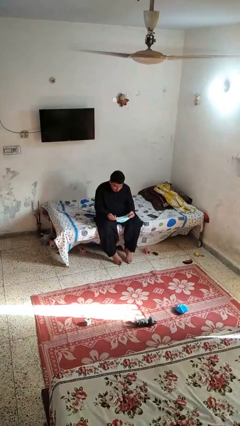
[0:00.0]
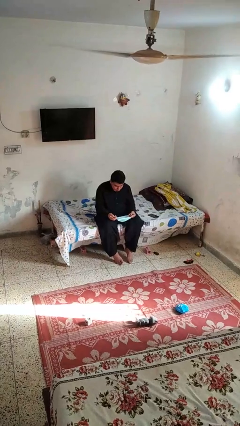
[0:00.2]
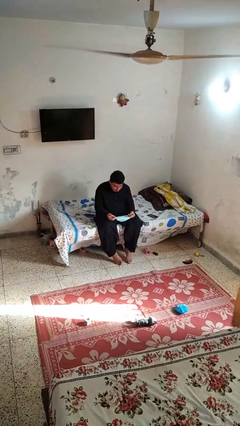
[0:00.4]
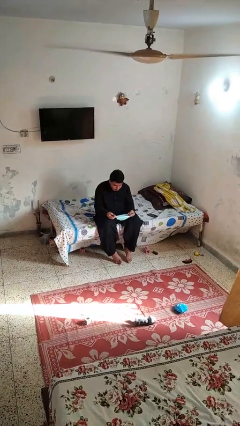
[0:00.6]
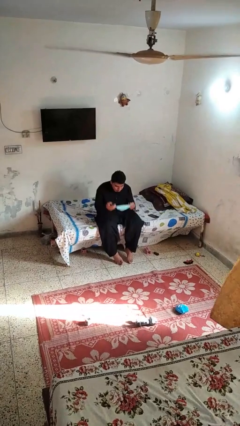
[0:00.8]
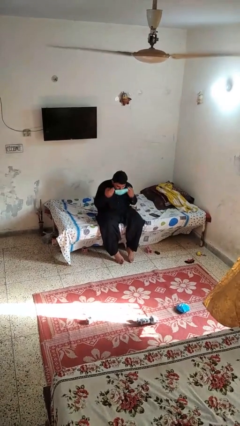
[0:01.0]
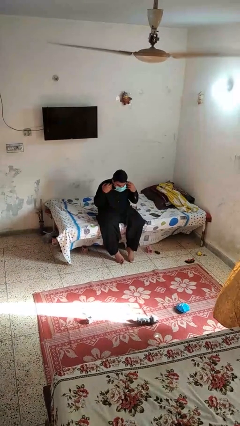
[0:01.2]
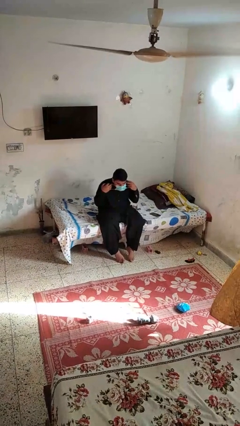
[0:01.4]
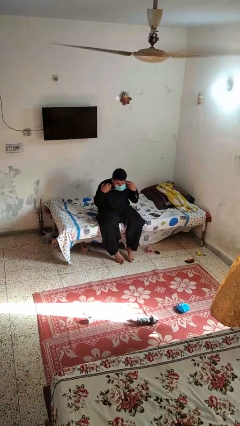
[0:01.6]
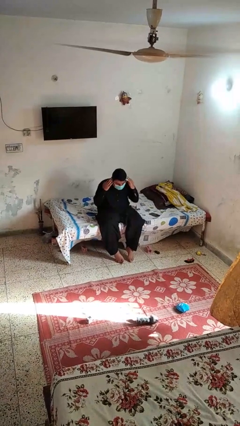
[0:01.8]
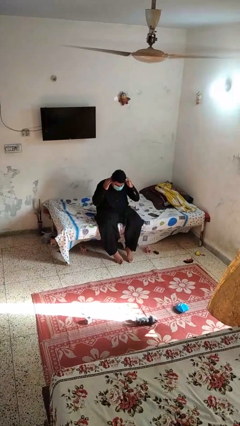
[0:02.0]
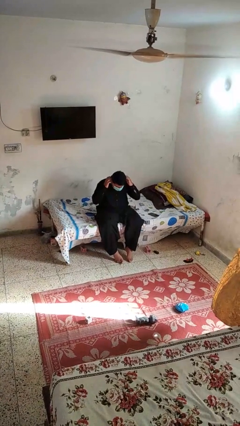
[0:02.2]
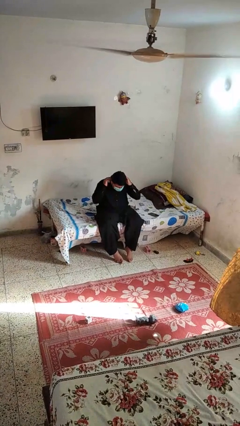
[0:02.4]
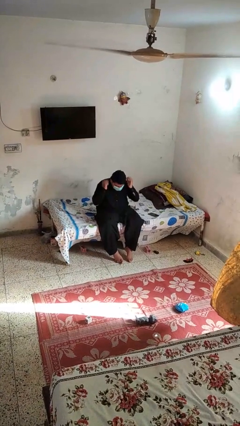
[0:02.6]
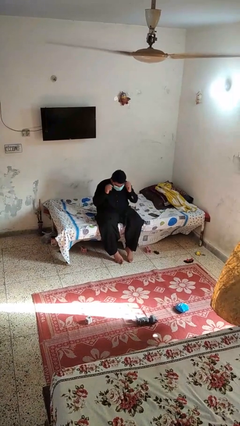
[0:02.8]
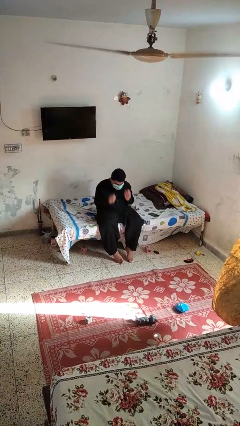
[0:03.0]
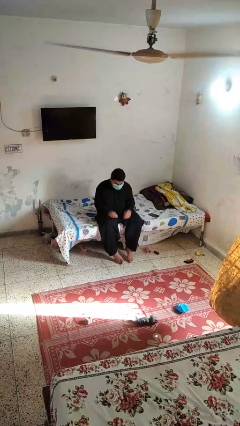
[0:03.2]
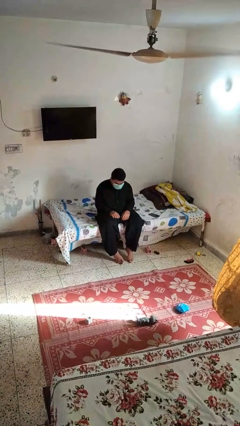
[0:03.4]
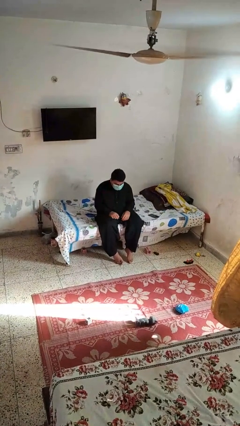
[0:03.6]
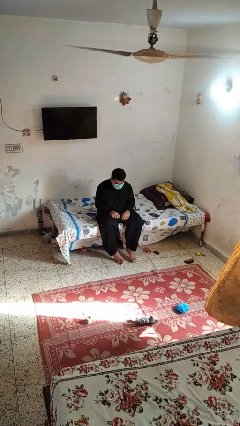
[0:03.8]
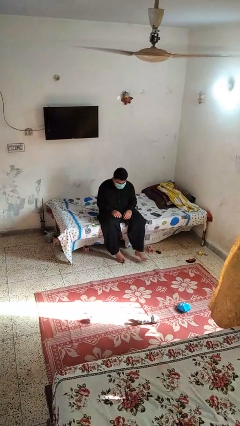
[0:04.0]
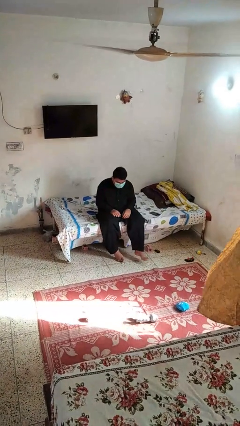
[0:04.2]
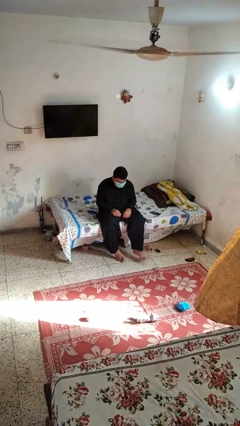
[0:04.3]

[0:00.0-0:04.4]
person puts on facemask

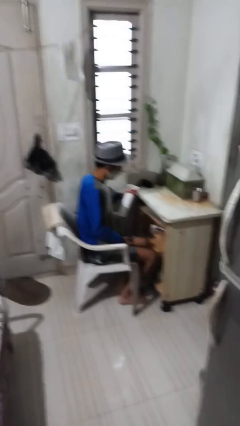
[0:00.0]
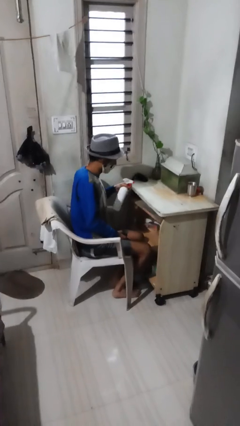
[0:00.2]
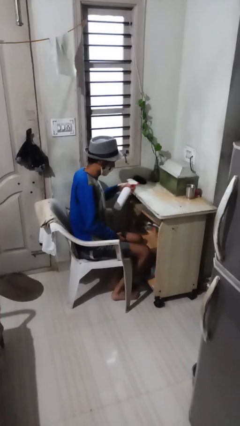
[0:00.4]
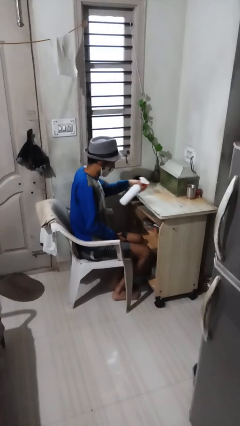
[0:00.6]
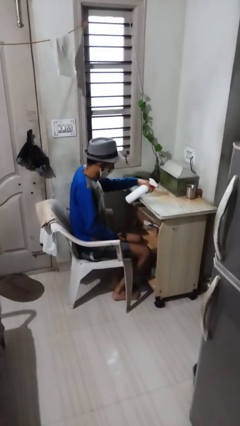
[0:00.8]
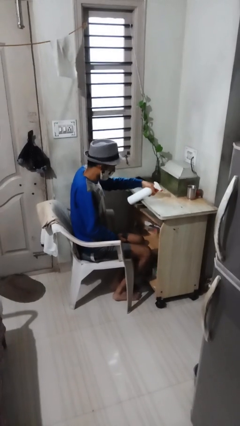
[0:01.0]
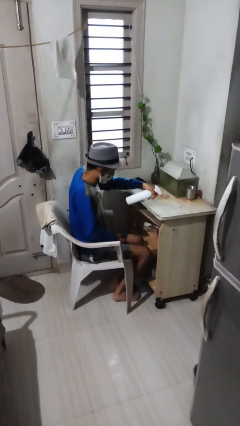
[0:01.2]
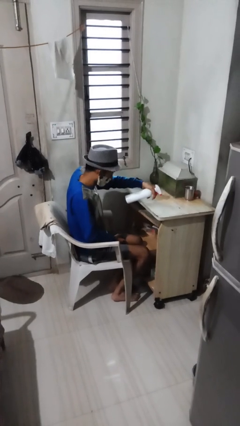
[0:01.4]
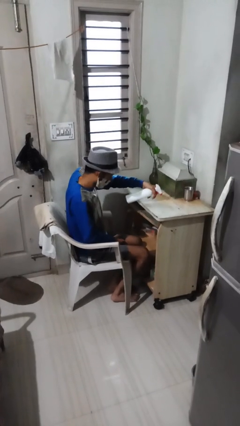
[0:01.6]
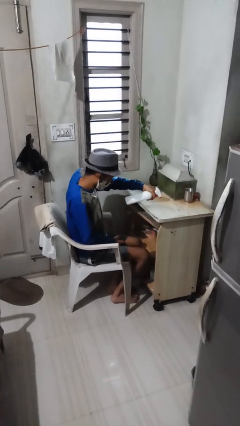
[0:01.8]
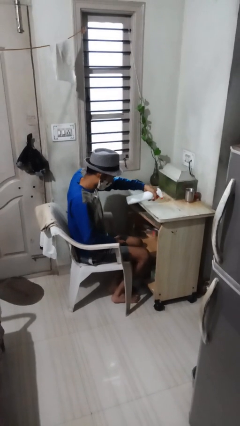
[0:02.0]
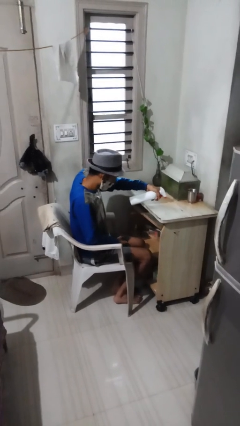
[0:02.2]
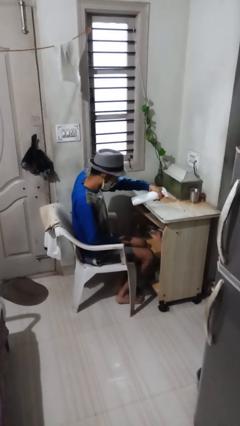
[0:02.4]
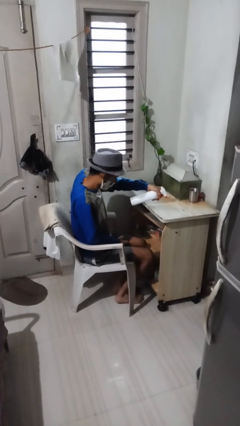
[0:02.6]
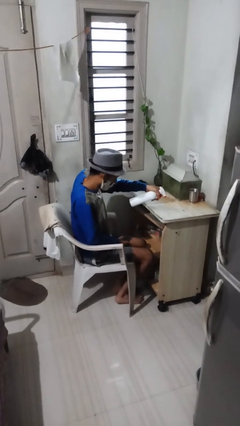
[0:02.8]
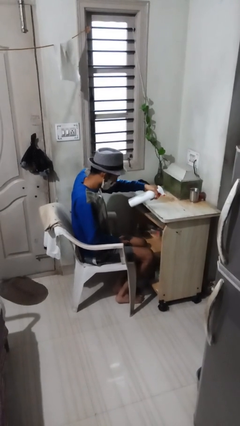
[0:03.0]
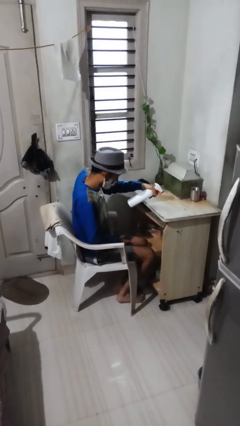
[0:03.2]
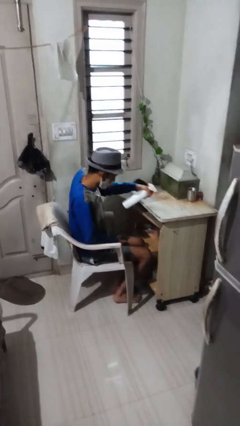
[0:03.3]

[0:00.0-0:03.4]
person sprays from bottle

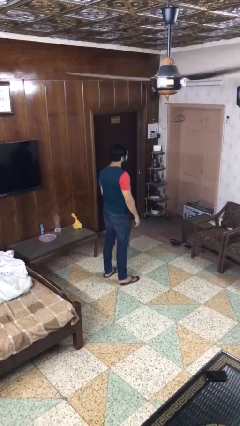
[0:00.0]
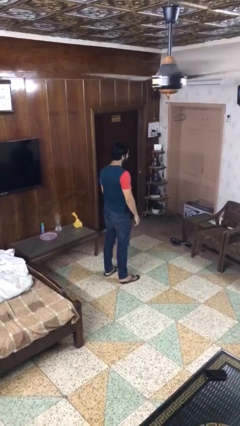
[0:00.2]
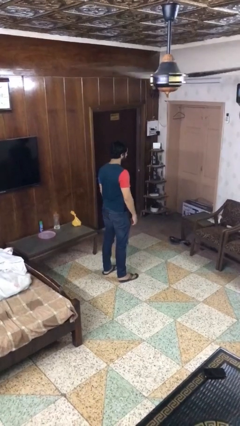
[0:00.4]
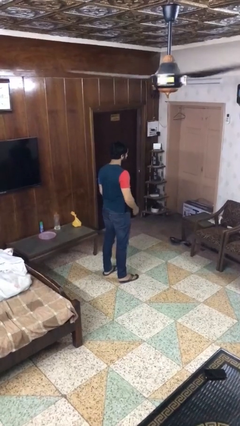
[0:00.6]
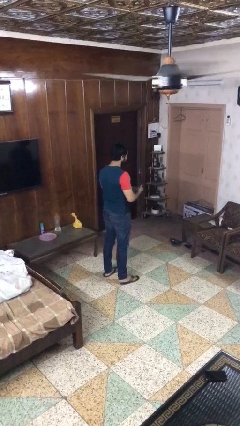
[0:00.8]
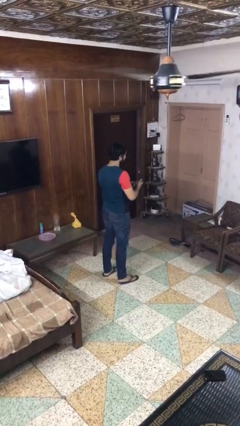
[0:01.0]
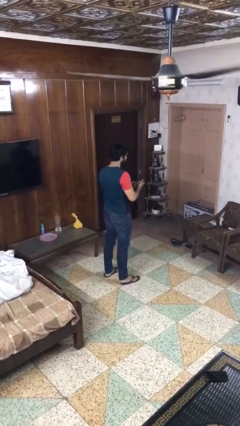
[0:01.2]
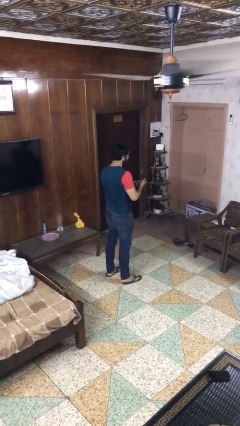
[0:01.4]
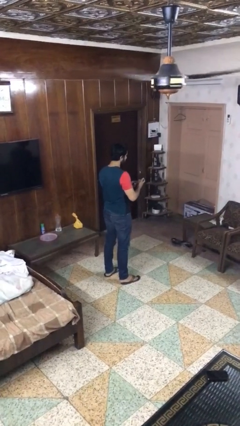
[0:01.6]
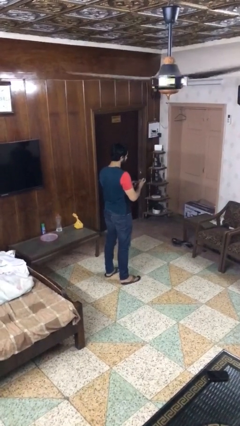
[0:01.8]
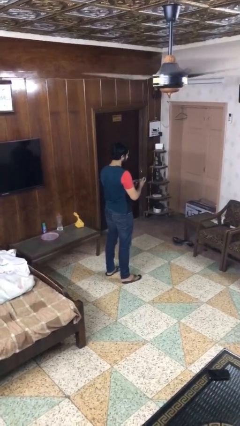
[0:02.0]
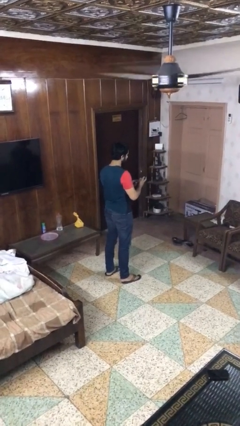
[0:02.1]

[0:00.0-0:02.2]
person files fingernails

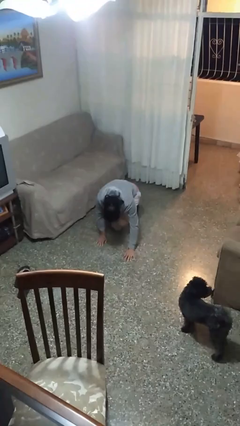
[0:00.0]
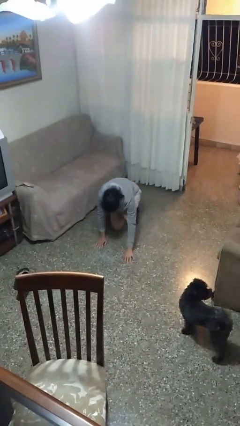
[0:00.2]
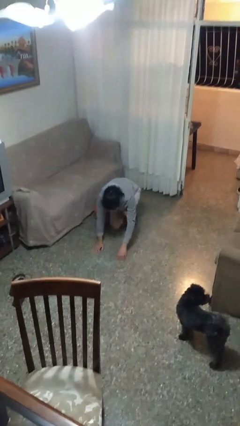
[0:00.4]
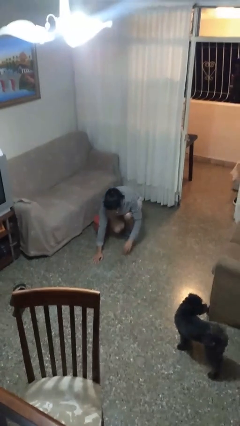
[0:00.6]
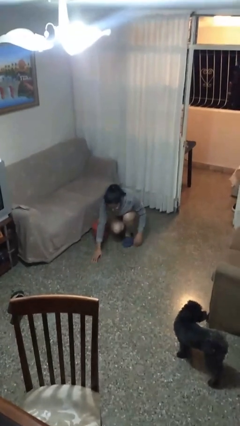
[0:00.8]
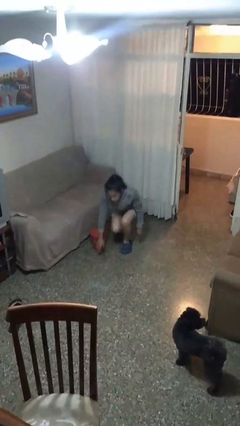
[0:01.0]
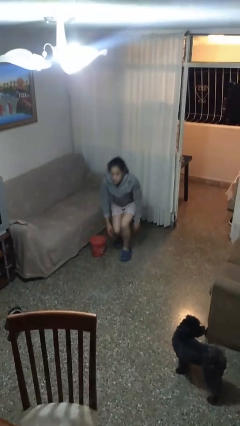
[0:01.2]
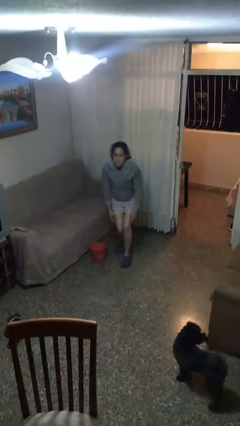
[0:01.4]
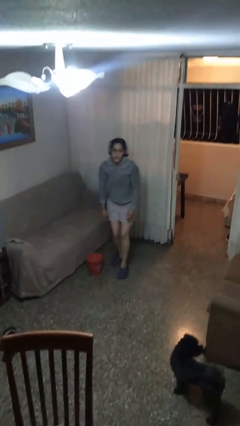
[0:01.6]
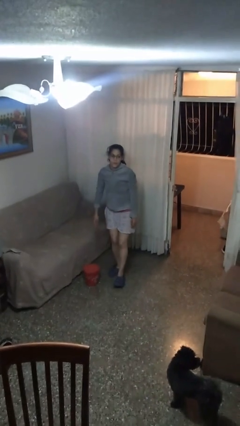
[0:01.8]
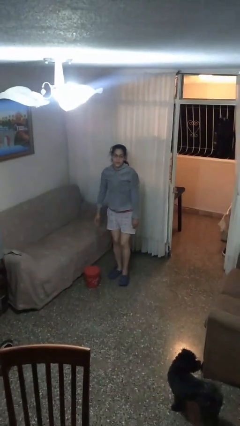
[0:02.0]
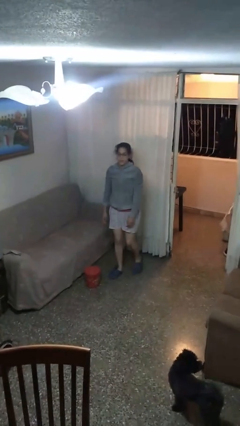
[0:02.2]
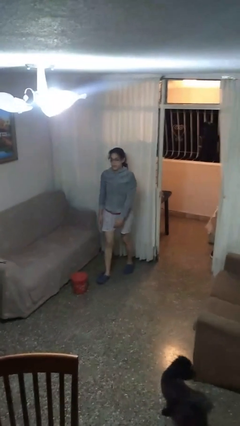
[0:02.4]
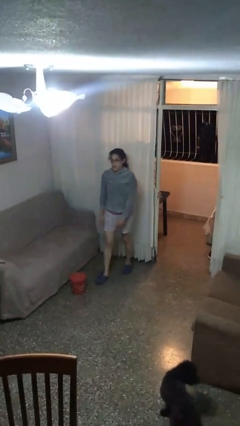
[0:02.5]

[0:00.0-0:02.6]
person stands up from floor

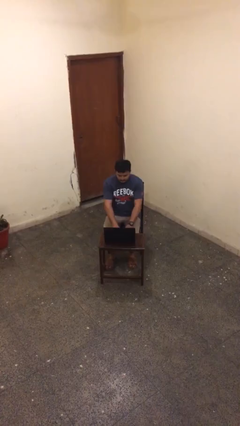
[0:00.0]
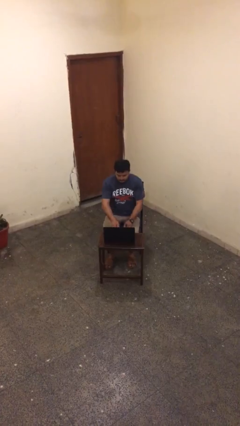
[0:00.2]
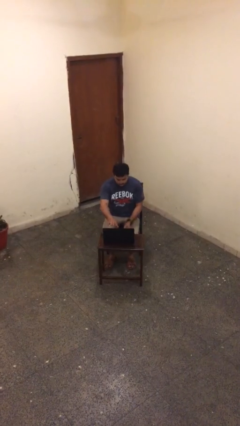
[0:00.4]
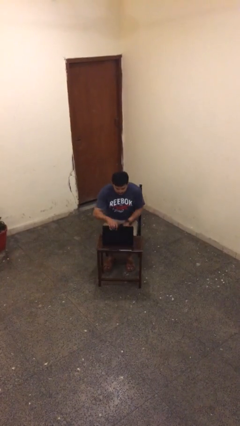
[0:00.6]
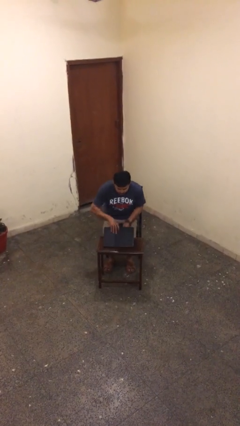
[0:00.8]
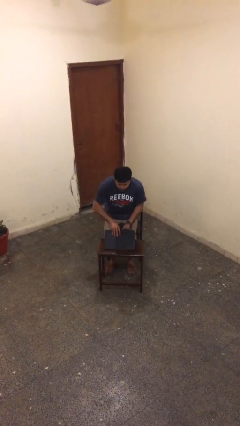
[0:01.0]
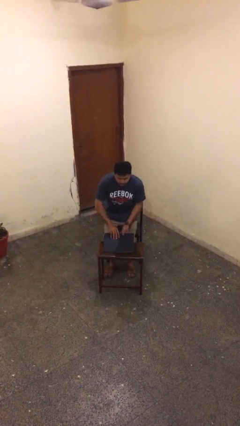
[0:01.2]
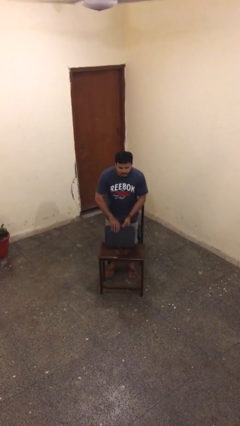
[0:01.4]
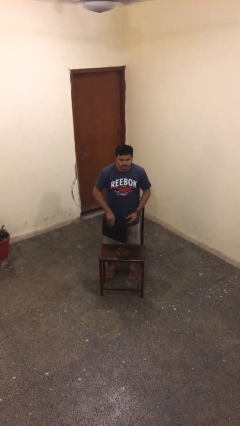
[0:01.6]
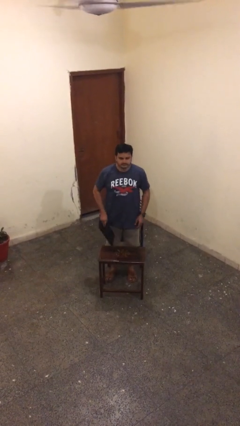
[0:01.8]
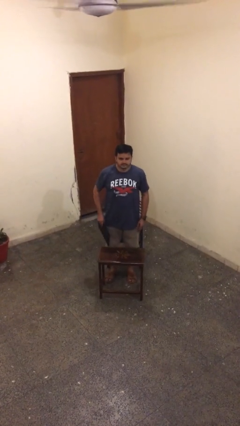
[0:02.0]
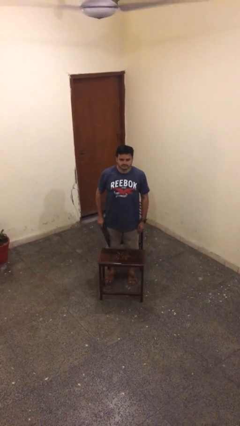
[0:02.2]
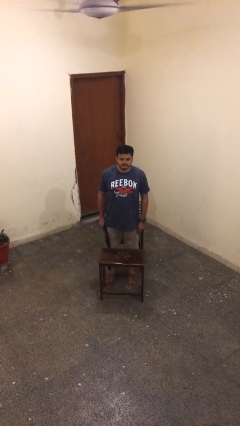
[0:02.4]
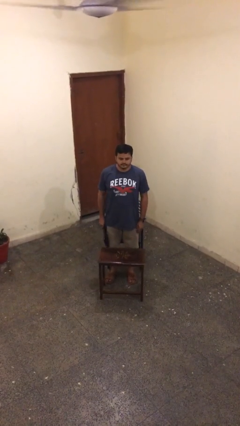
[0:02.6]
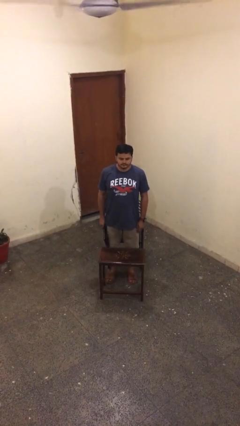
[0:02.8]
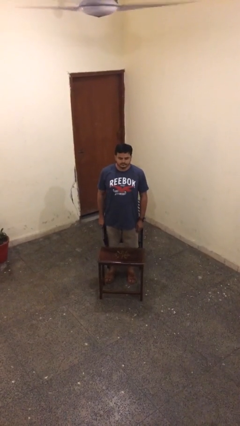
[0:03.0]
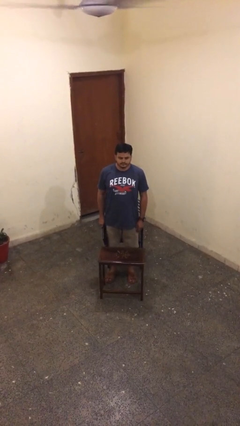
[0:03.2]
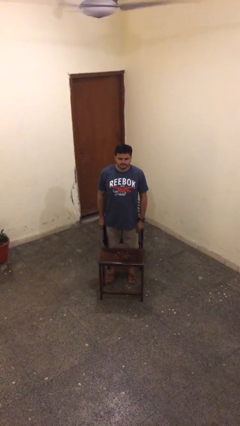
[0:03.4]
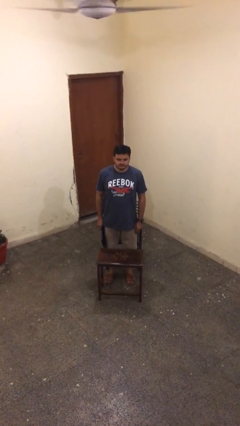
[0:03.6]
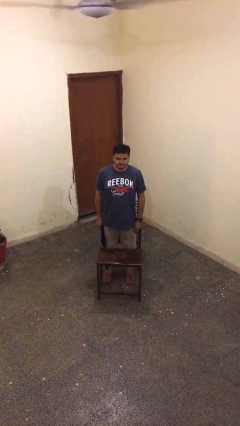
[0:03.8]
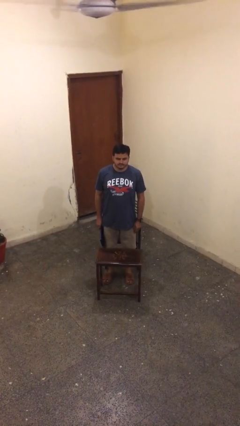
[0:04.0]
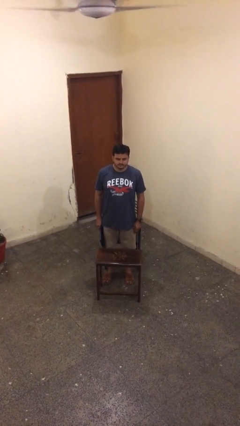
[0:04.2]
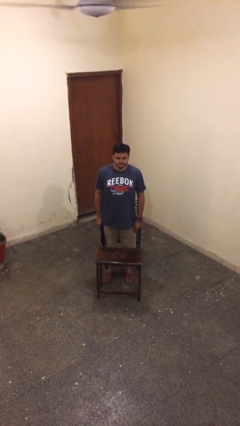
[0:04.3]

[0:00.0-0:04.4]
person stands up

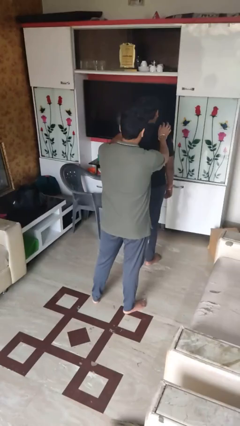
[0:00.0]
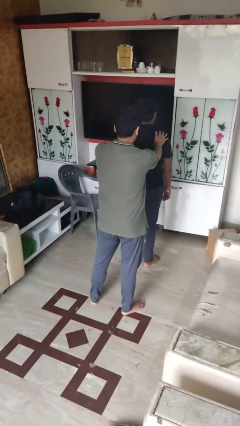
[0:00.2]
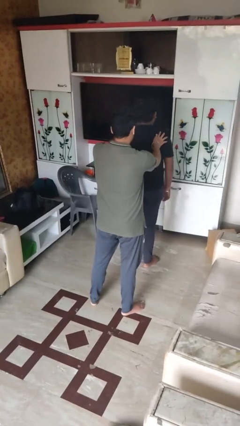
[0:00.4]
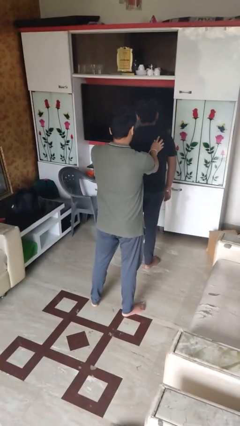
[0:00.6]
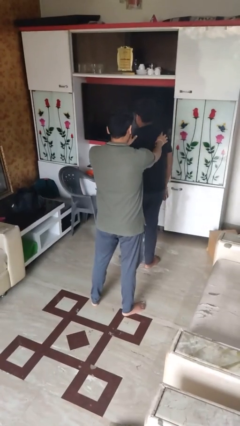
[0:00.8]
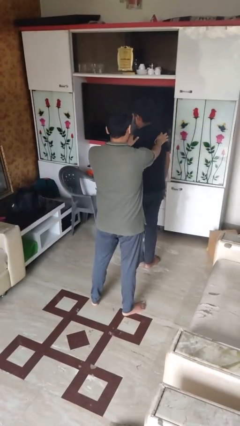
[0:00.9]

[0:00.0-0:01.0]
person grabs person by shoulder
